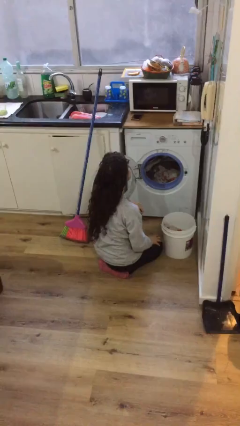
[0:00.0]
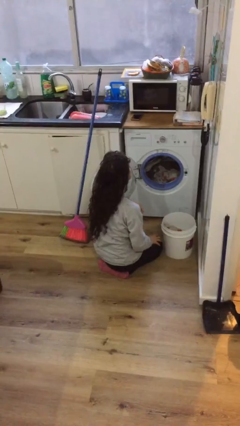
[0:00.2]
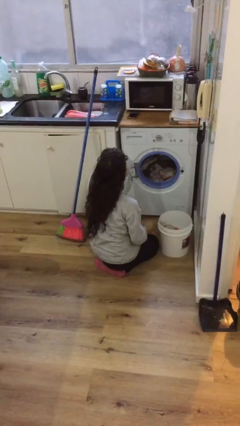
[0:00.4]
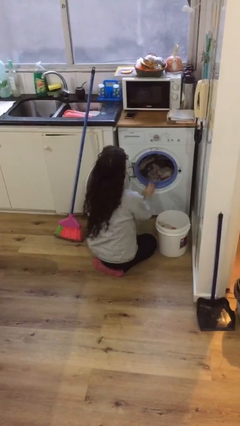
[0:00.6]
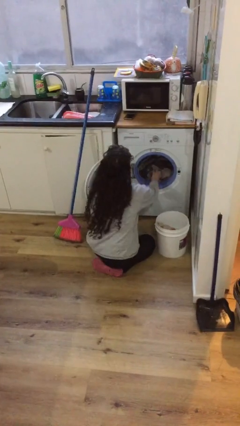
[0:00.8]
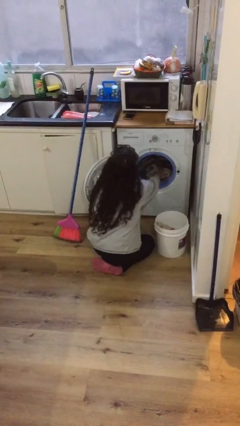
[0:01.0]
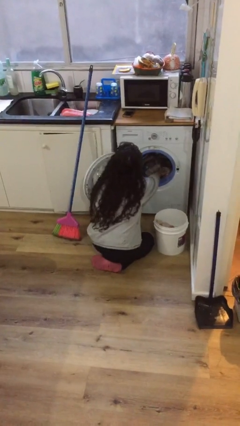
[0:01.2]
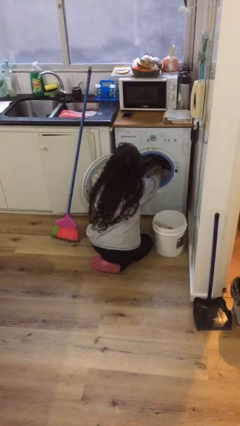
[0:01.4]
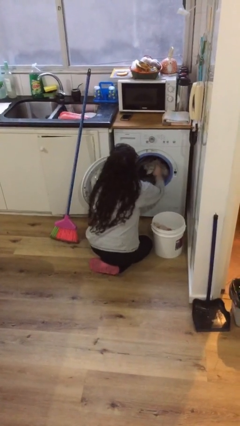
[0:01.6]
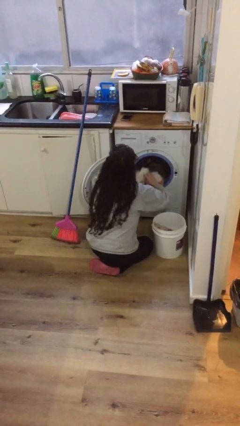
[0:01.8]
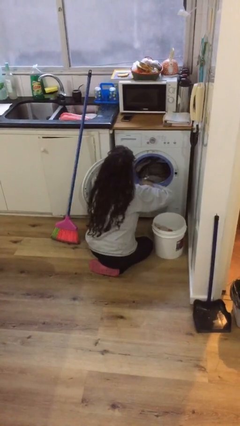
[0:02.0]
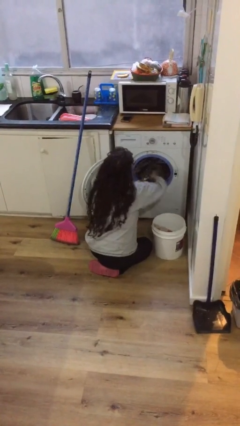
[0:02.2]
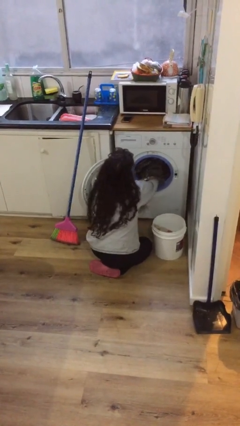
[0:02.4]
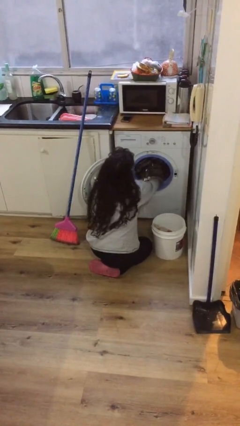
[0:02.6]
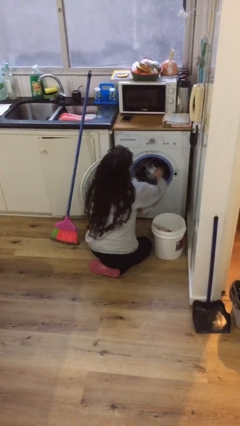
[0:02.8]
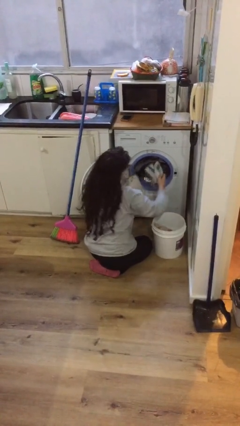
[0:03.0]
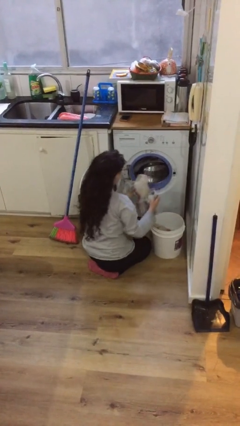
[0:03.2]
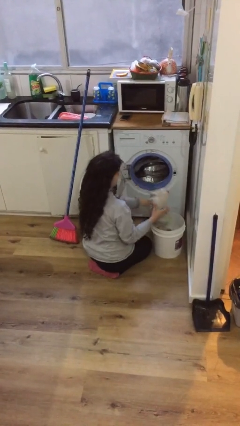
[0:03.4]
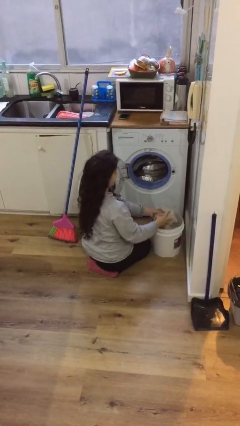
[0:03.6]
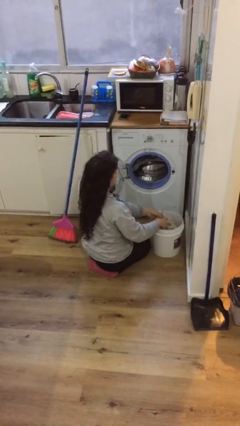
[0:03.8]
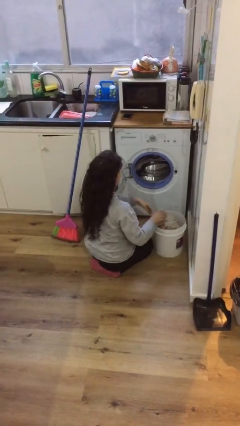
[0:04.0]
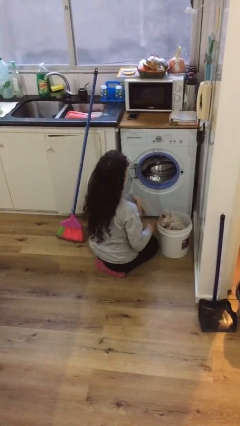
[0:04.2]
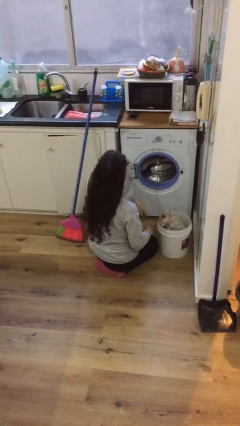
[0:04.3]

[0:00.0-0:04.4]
person unloads clotheswasher

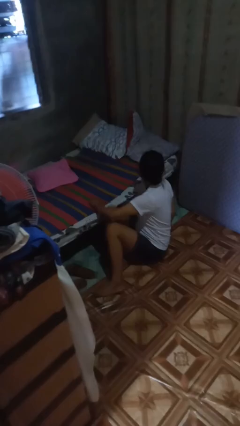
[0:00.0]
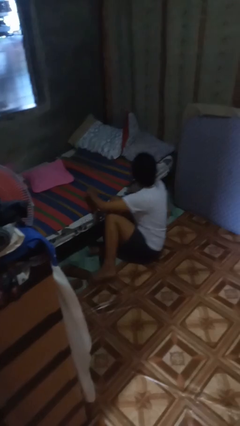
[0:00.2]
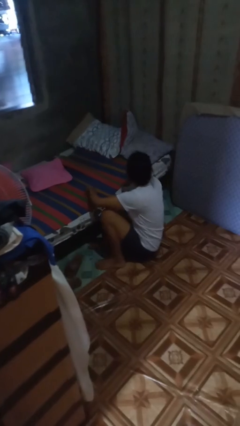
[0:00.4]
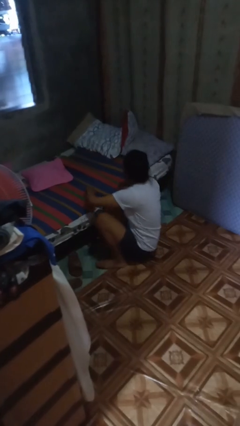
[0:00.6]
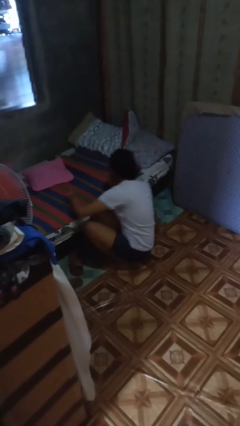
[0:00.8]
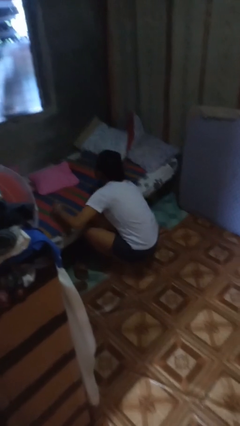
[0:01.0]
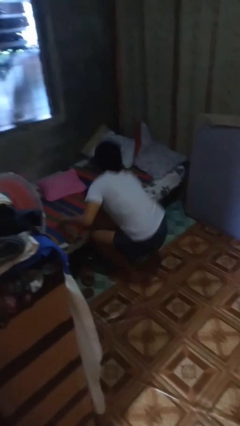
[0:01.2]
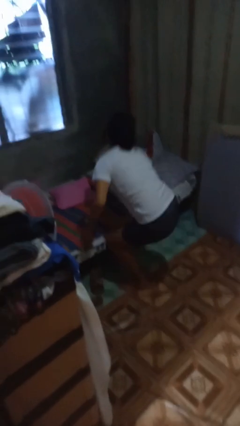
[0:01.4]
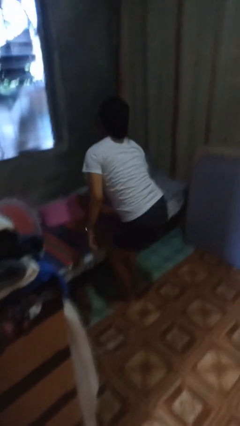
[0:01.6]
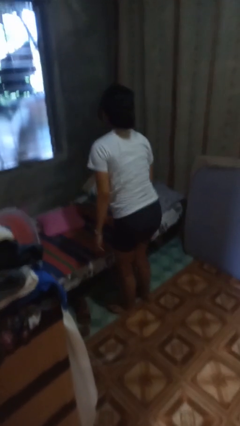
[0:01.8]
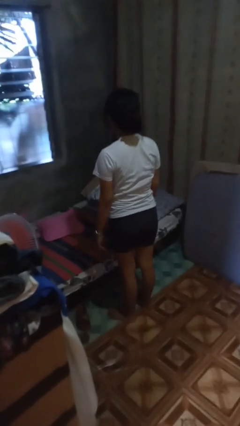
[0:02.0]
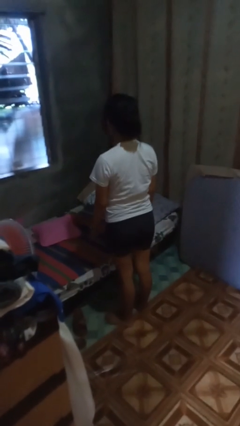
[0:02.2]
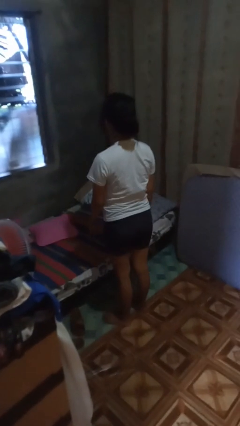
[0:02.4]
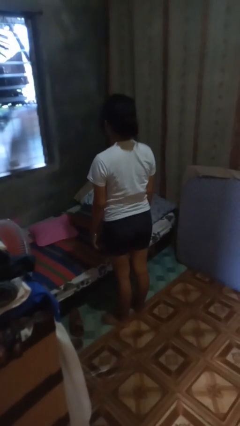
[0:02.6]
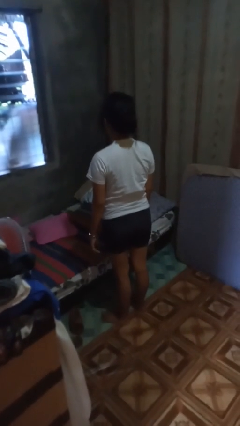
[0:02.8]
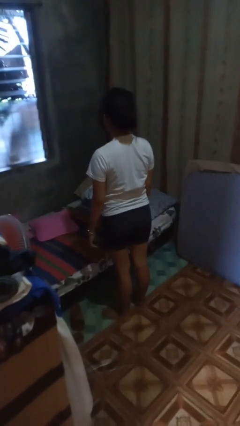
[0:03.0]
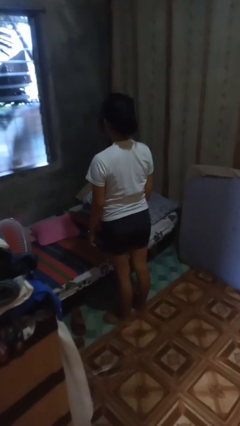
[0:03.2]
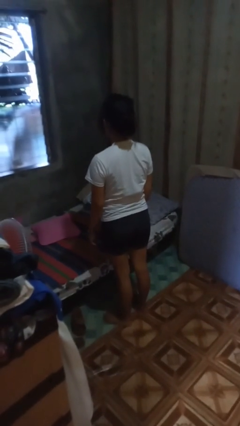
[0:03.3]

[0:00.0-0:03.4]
person stands up from floor

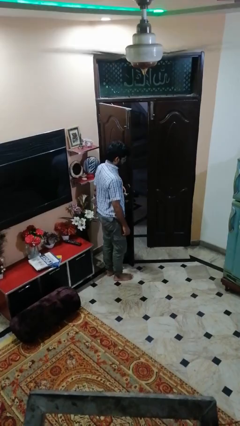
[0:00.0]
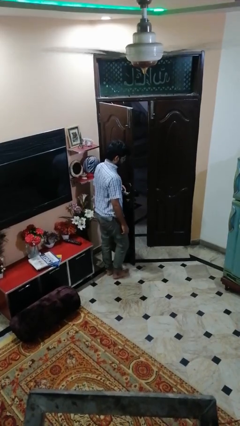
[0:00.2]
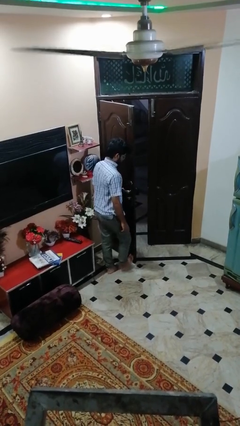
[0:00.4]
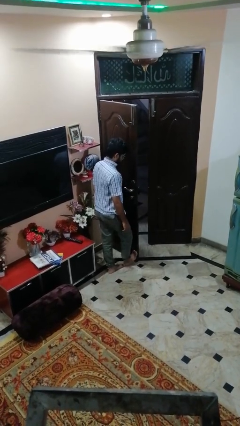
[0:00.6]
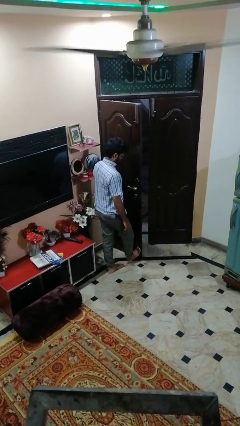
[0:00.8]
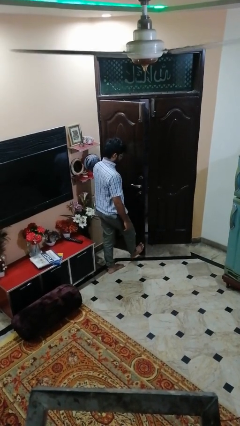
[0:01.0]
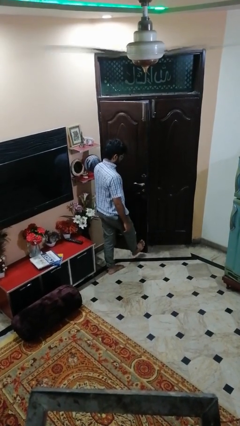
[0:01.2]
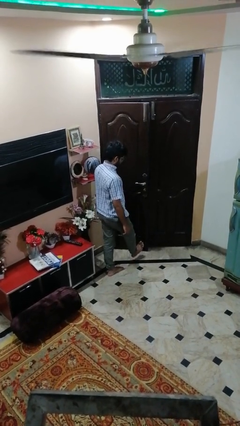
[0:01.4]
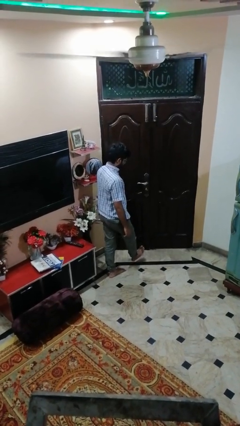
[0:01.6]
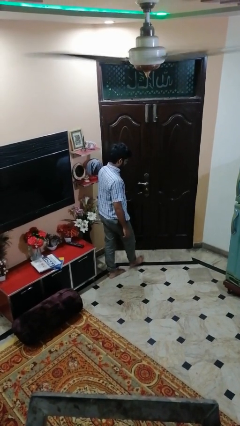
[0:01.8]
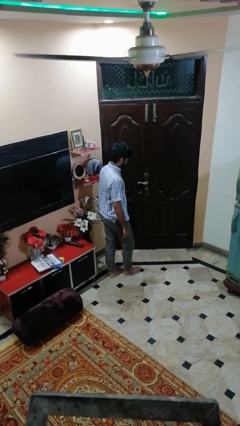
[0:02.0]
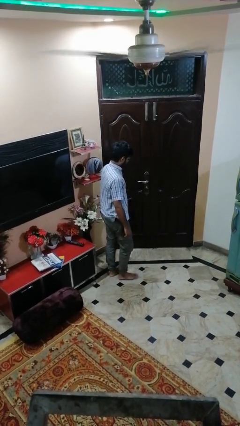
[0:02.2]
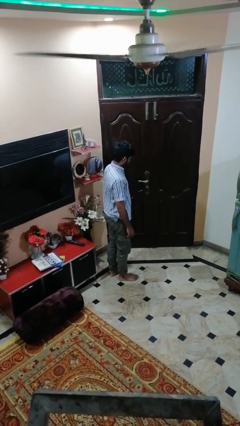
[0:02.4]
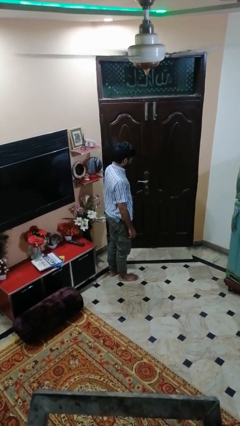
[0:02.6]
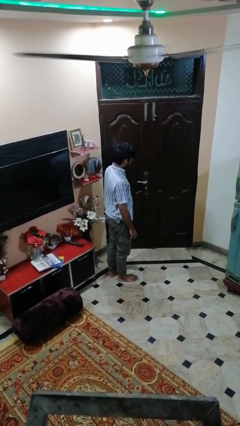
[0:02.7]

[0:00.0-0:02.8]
person closes door with foot

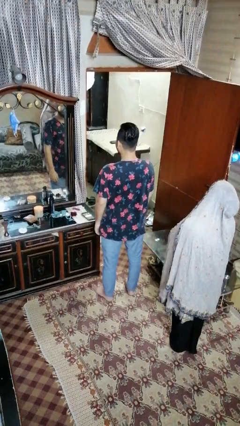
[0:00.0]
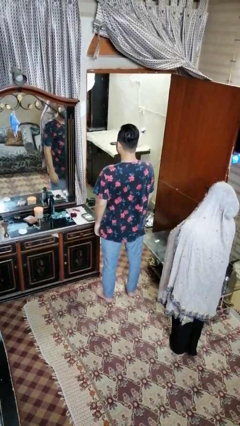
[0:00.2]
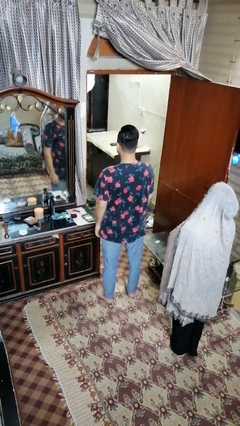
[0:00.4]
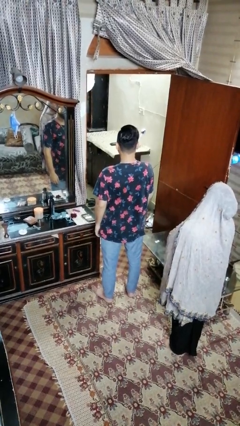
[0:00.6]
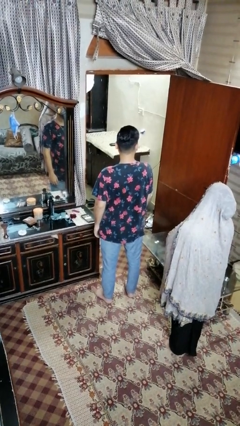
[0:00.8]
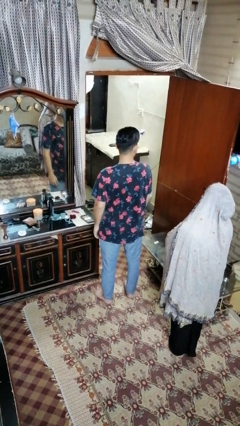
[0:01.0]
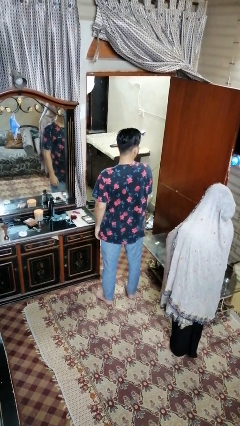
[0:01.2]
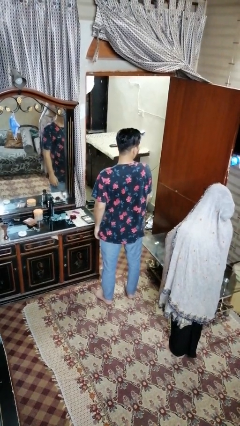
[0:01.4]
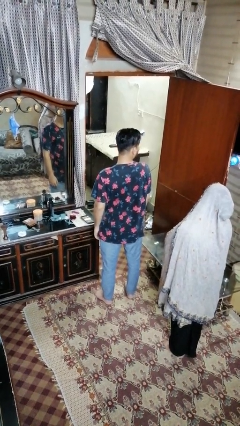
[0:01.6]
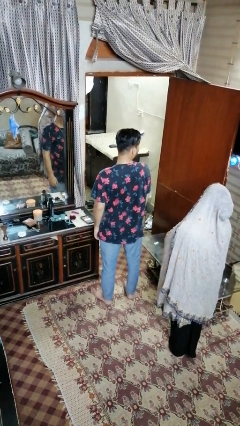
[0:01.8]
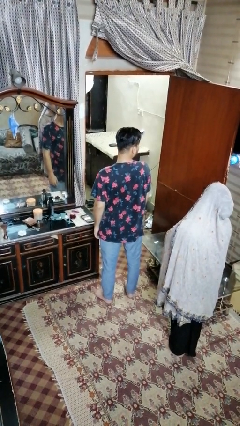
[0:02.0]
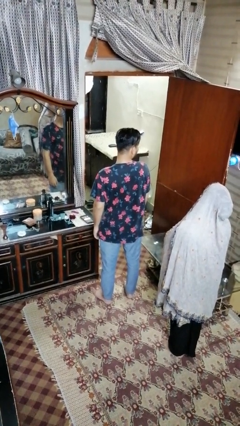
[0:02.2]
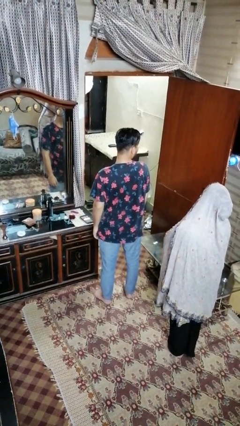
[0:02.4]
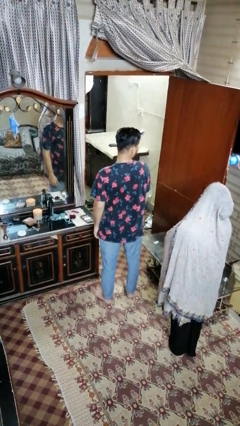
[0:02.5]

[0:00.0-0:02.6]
person looks over shoulder

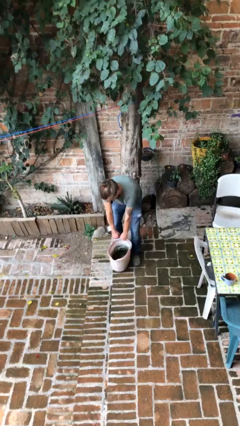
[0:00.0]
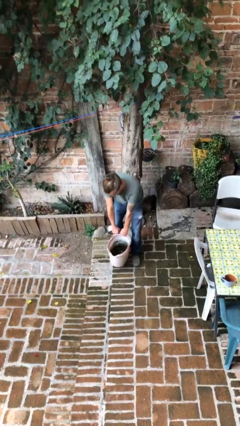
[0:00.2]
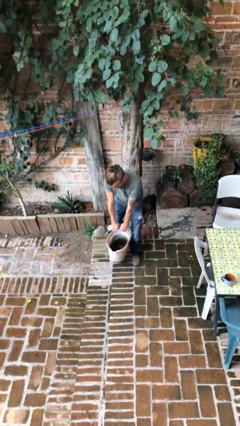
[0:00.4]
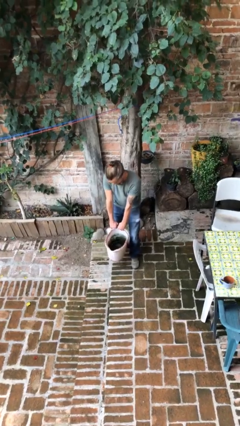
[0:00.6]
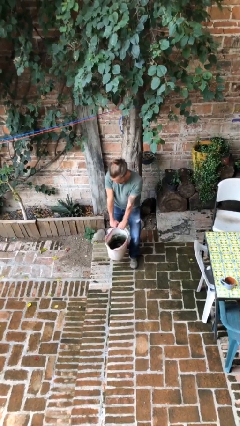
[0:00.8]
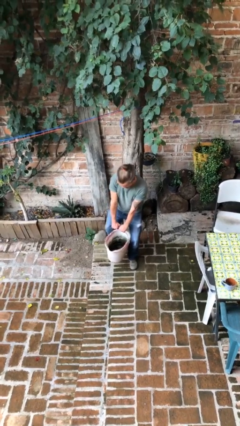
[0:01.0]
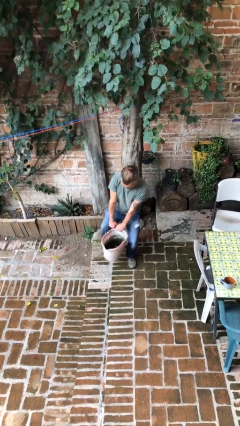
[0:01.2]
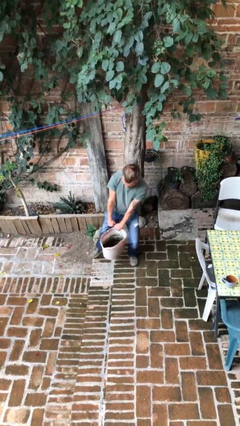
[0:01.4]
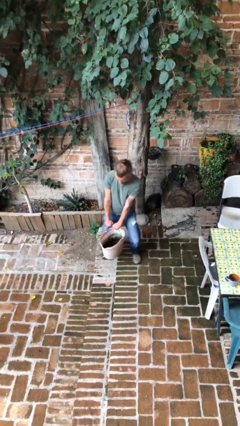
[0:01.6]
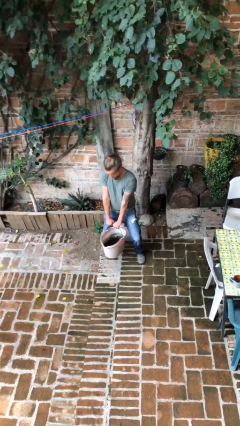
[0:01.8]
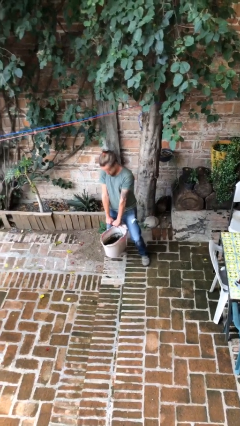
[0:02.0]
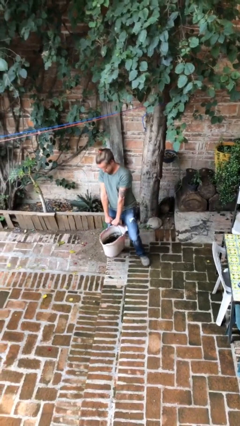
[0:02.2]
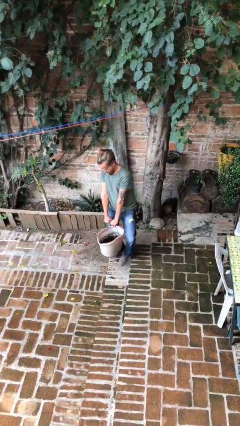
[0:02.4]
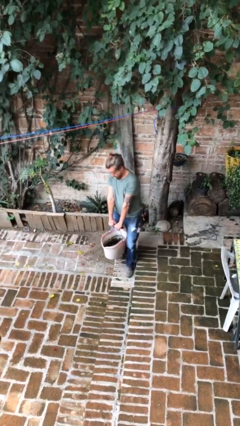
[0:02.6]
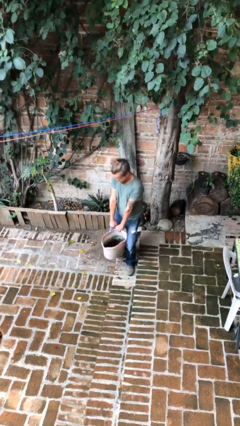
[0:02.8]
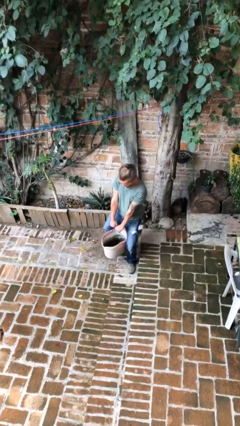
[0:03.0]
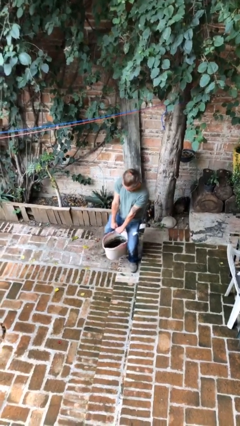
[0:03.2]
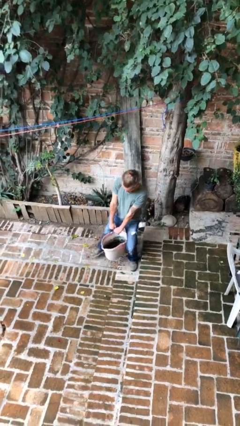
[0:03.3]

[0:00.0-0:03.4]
person carries heavy object

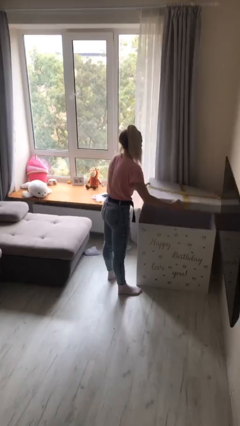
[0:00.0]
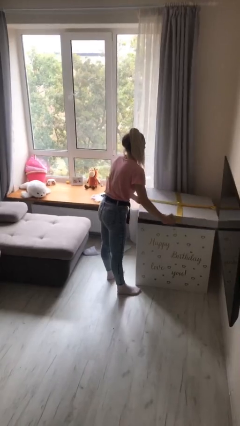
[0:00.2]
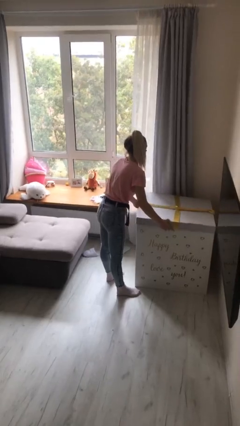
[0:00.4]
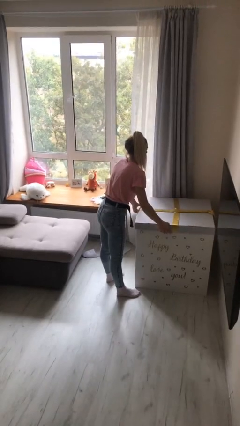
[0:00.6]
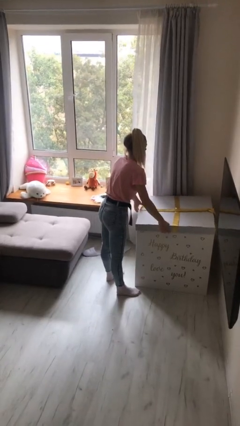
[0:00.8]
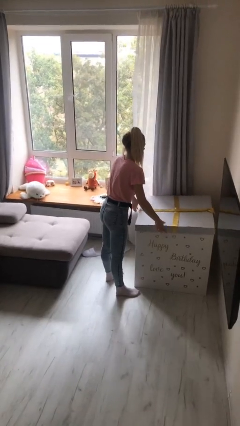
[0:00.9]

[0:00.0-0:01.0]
person closes box
